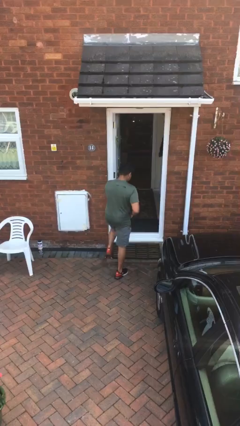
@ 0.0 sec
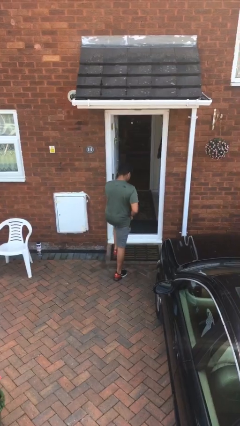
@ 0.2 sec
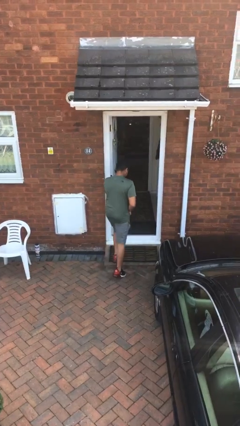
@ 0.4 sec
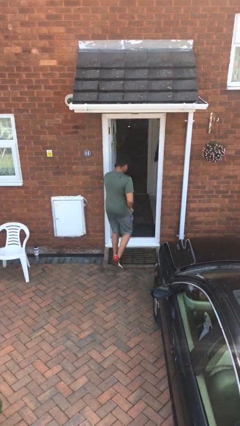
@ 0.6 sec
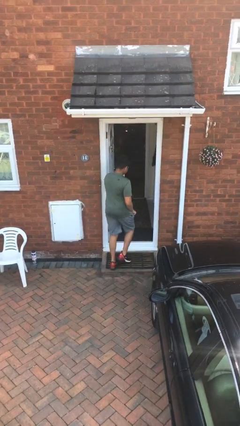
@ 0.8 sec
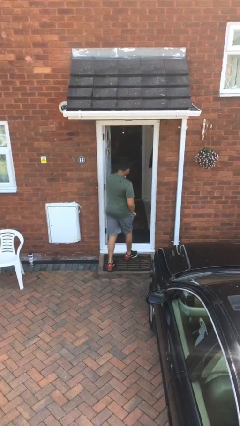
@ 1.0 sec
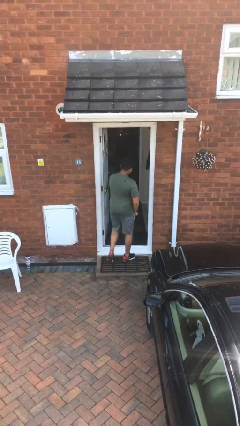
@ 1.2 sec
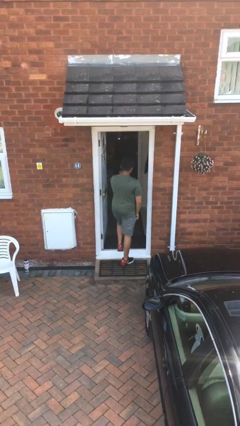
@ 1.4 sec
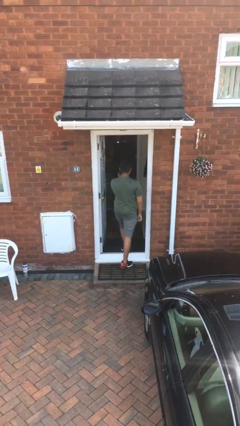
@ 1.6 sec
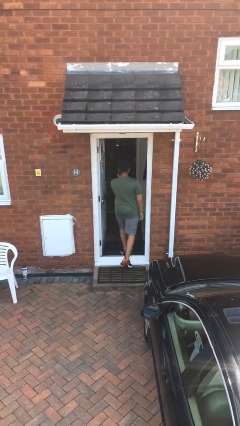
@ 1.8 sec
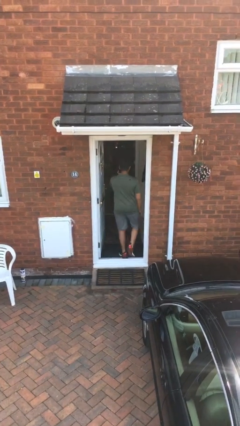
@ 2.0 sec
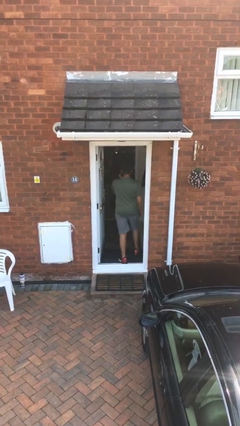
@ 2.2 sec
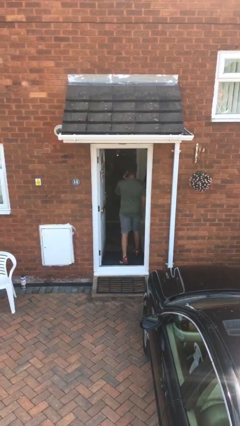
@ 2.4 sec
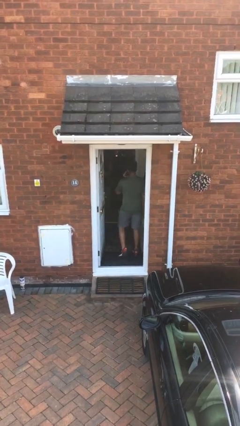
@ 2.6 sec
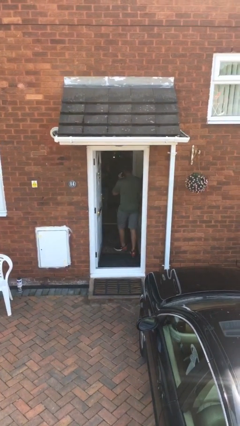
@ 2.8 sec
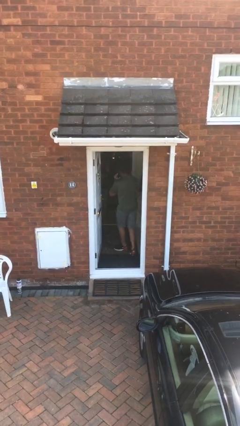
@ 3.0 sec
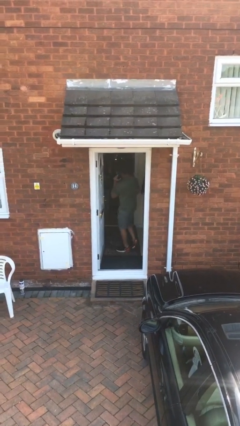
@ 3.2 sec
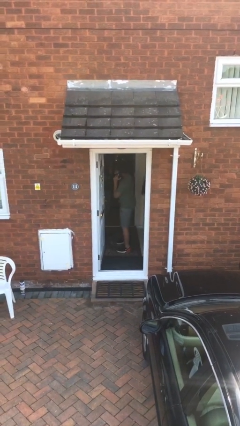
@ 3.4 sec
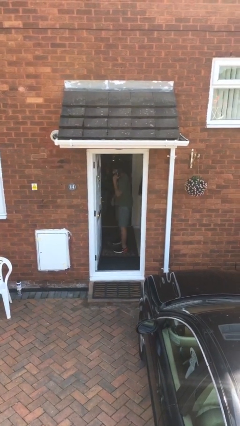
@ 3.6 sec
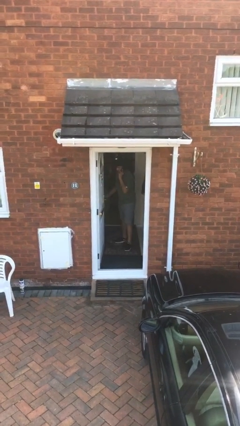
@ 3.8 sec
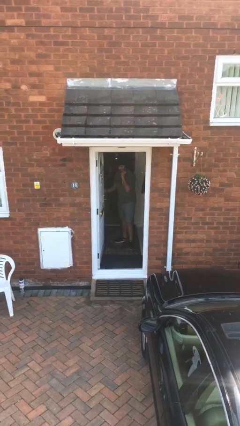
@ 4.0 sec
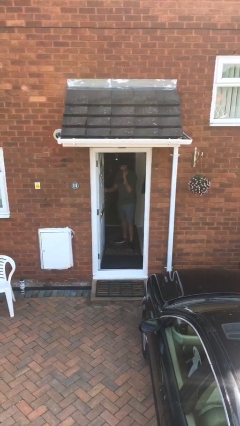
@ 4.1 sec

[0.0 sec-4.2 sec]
person exits scene through structure

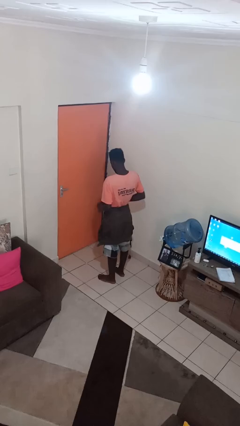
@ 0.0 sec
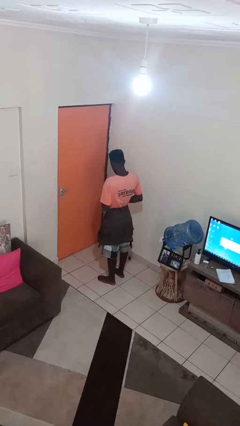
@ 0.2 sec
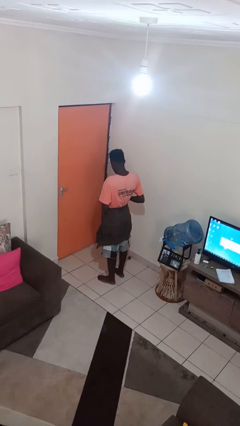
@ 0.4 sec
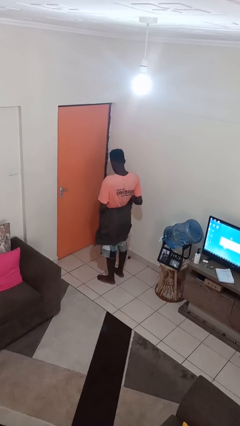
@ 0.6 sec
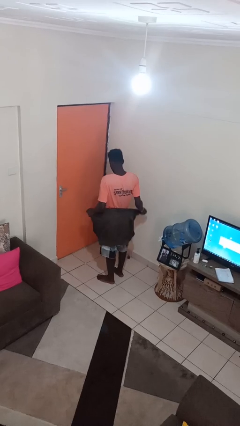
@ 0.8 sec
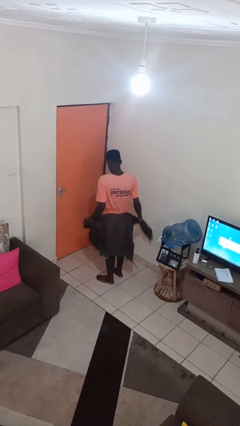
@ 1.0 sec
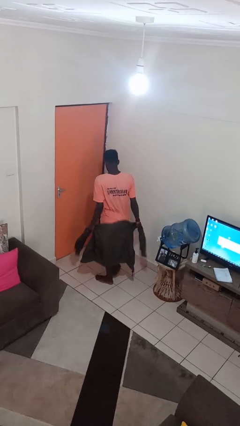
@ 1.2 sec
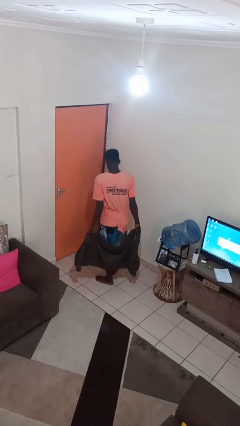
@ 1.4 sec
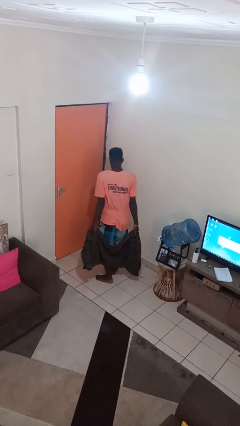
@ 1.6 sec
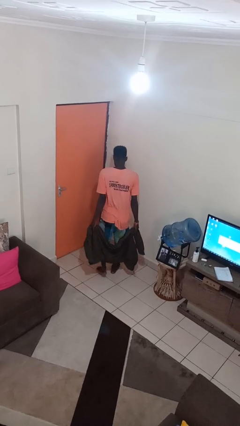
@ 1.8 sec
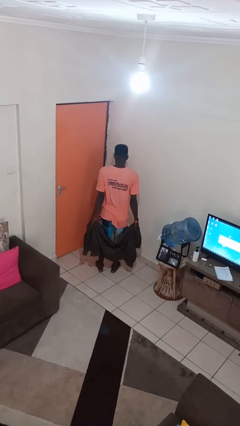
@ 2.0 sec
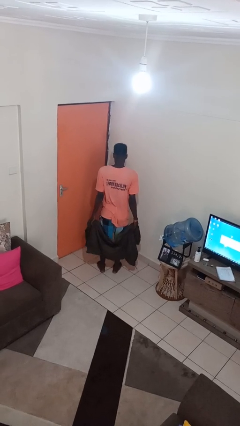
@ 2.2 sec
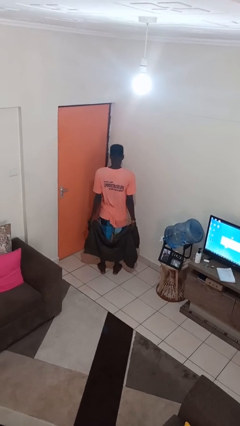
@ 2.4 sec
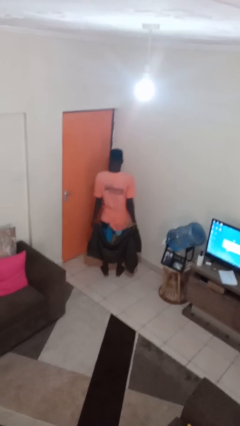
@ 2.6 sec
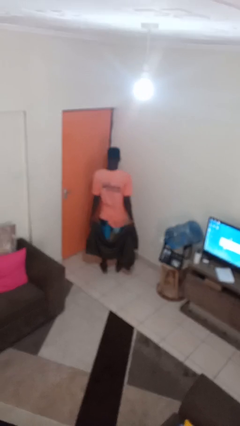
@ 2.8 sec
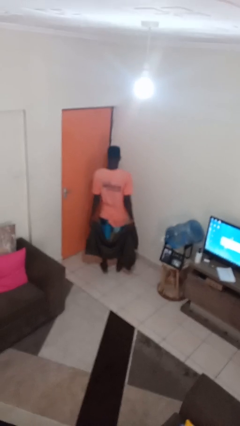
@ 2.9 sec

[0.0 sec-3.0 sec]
person unties jacket around waist

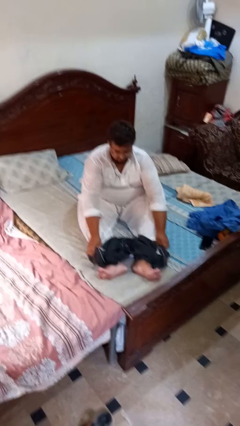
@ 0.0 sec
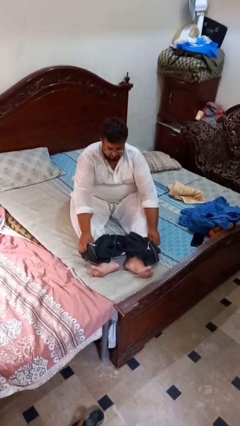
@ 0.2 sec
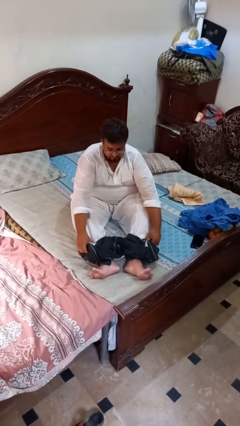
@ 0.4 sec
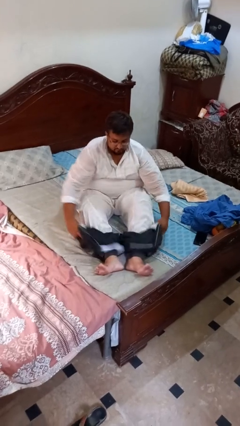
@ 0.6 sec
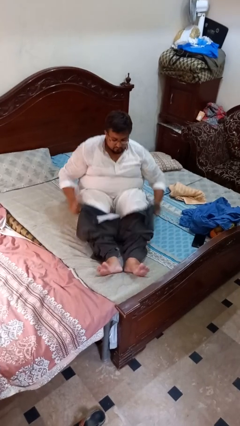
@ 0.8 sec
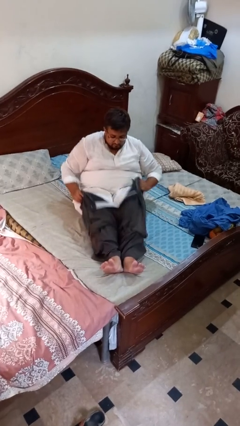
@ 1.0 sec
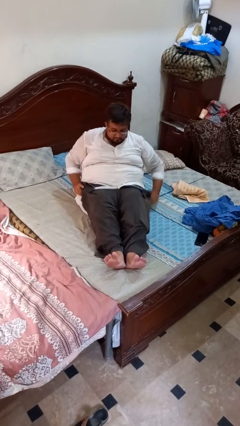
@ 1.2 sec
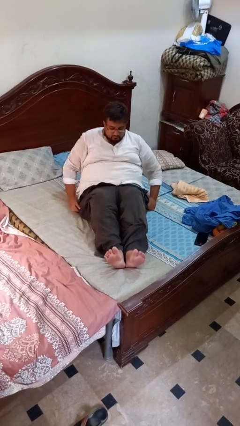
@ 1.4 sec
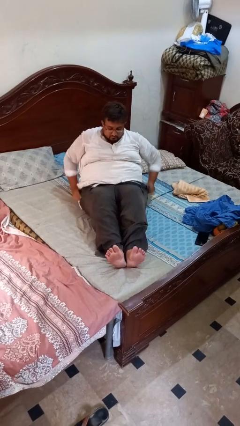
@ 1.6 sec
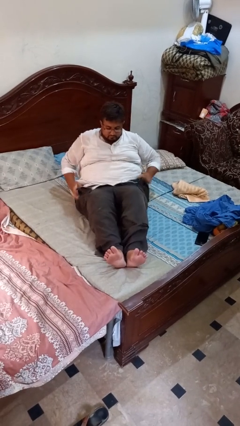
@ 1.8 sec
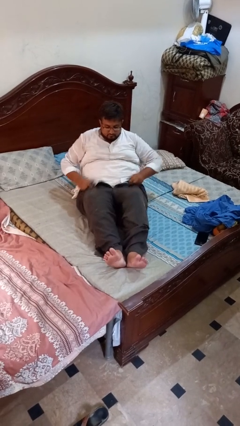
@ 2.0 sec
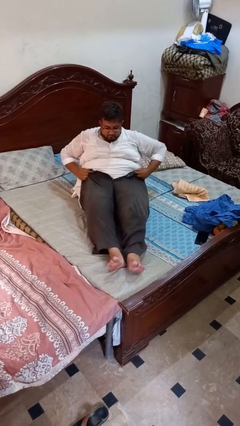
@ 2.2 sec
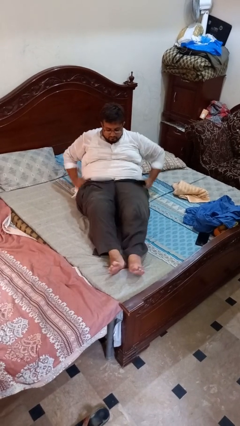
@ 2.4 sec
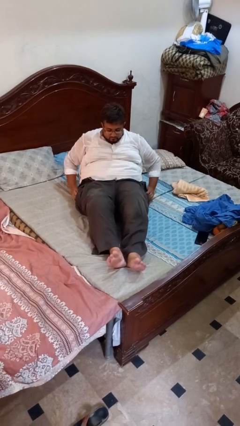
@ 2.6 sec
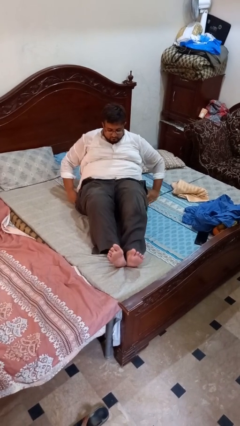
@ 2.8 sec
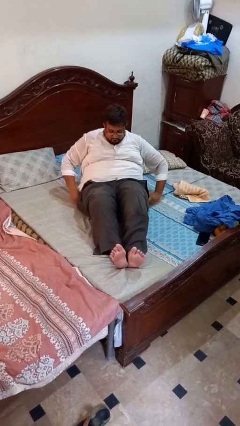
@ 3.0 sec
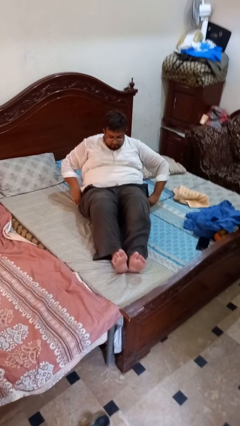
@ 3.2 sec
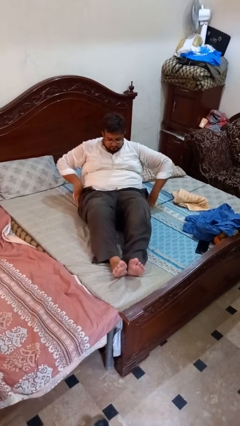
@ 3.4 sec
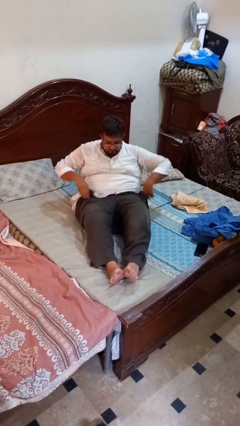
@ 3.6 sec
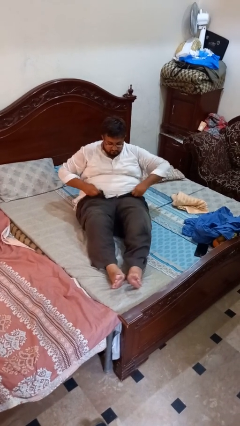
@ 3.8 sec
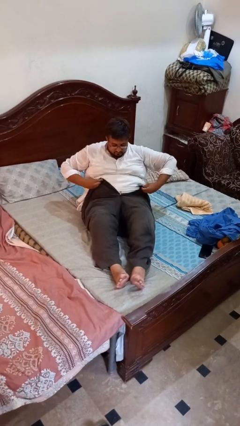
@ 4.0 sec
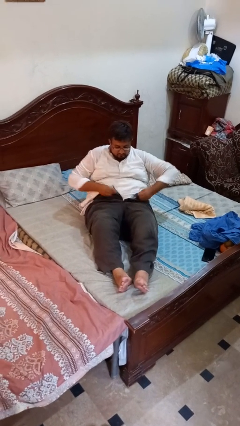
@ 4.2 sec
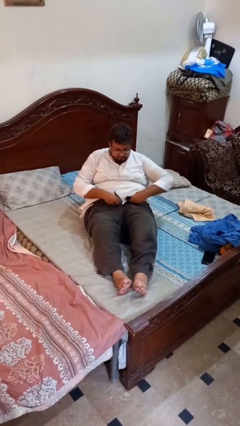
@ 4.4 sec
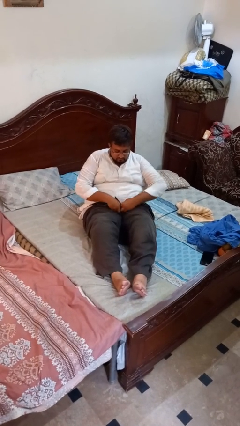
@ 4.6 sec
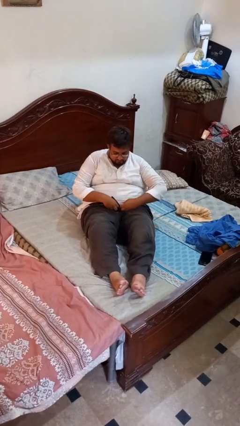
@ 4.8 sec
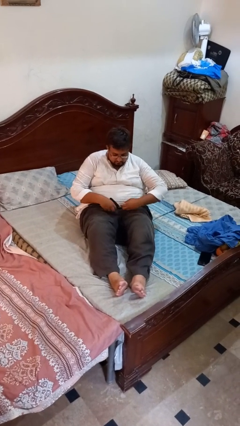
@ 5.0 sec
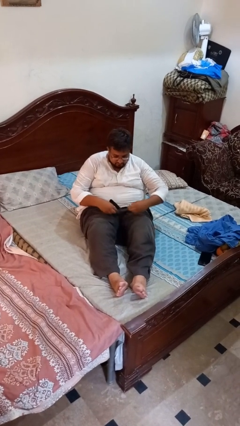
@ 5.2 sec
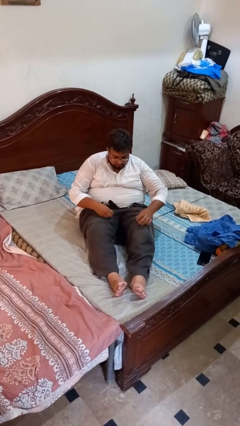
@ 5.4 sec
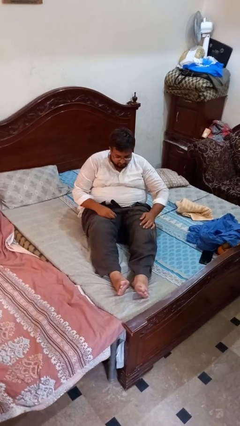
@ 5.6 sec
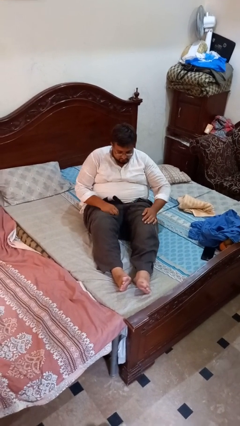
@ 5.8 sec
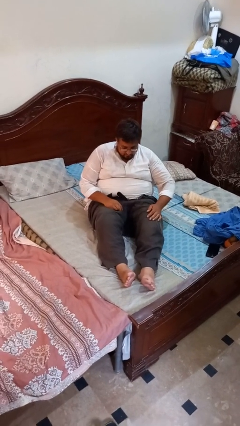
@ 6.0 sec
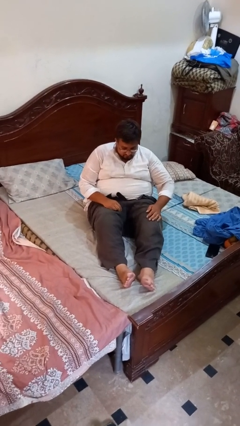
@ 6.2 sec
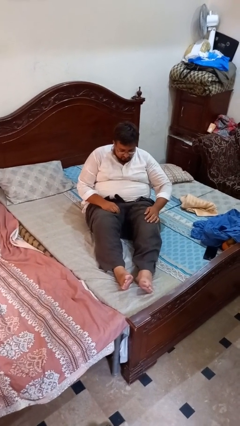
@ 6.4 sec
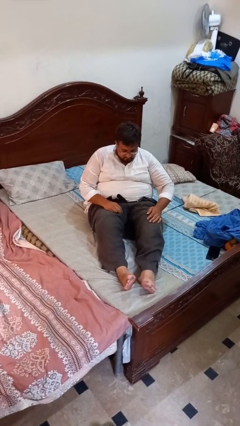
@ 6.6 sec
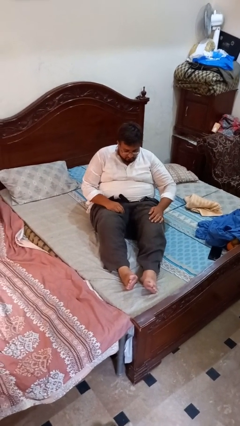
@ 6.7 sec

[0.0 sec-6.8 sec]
person puts on pants

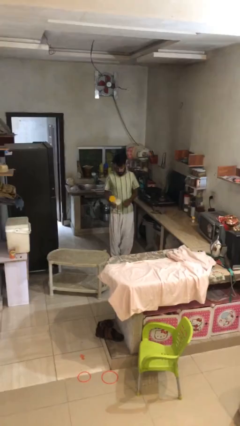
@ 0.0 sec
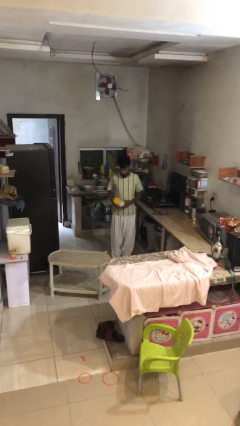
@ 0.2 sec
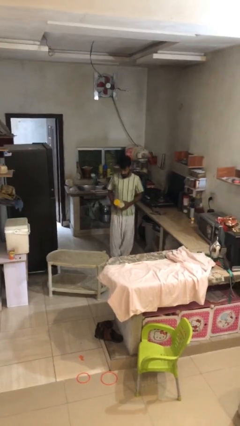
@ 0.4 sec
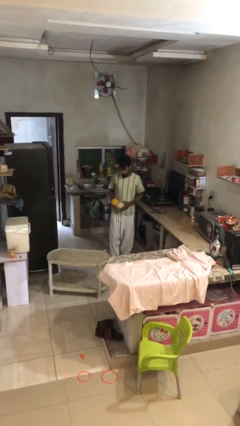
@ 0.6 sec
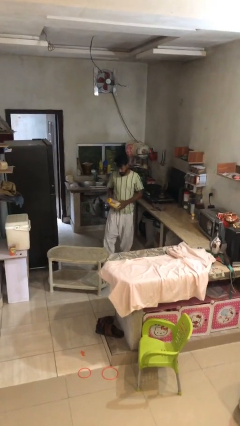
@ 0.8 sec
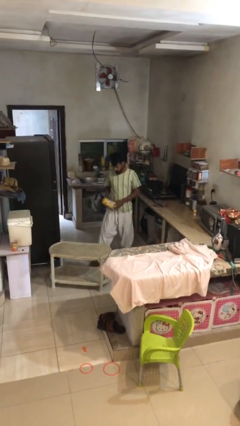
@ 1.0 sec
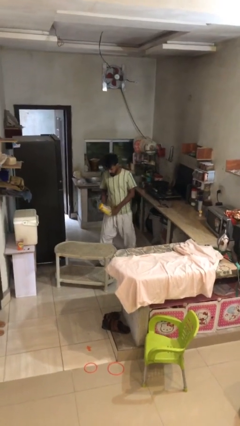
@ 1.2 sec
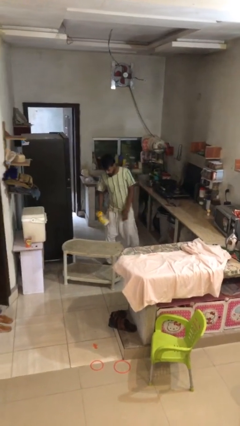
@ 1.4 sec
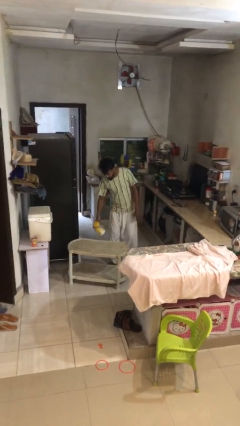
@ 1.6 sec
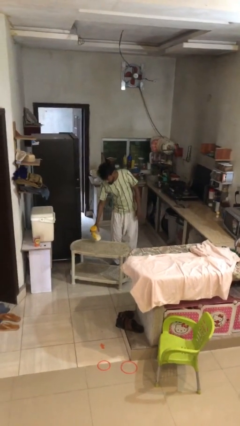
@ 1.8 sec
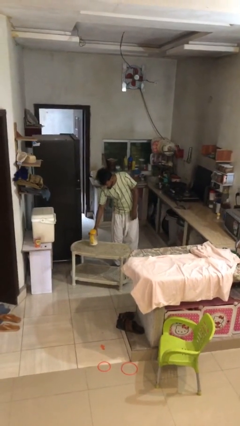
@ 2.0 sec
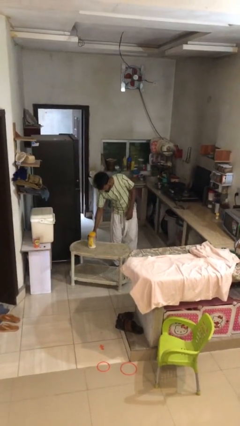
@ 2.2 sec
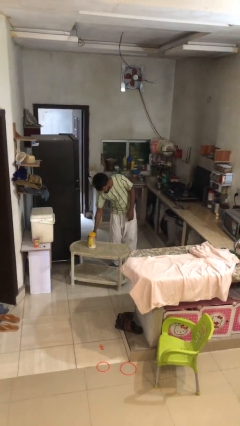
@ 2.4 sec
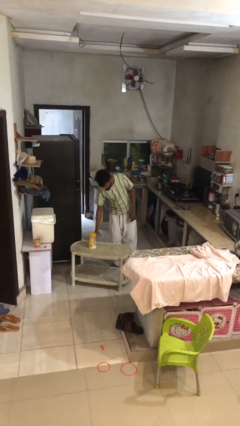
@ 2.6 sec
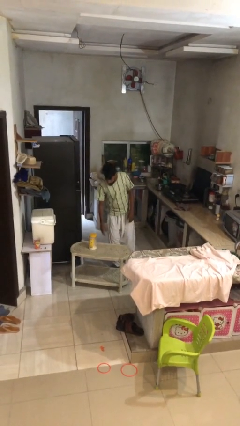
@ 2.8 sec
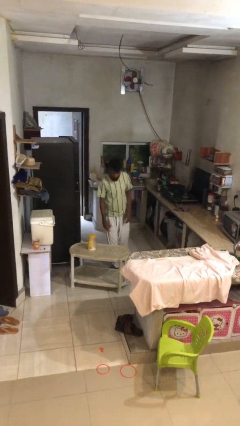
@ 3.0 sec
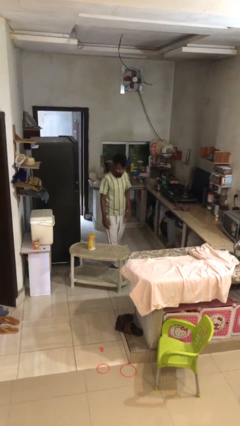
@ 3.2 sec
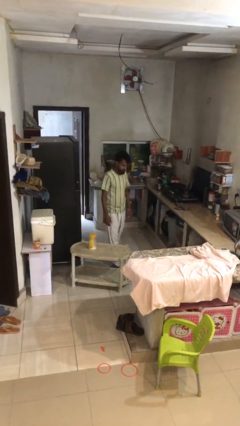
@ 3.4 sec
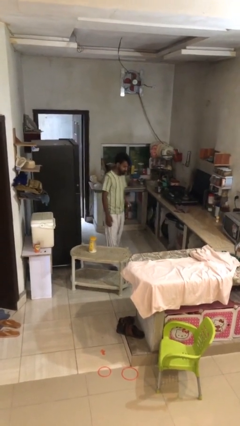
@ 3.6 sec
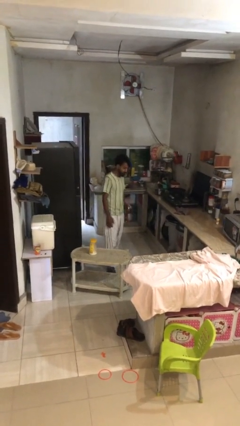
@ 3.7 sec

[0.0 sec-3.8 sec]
person puts down object on table

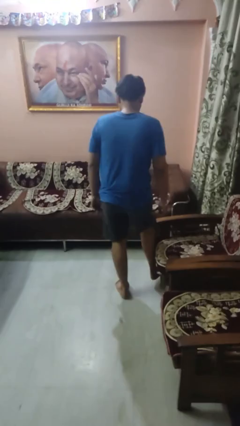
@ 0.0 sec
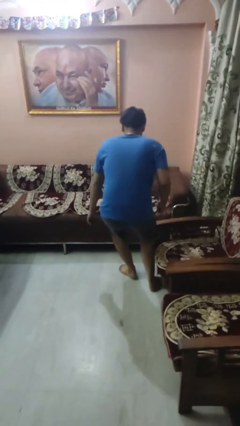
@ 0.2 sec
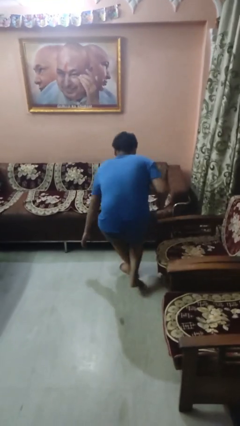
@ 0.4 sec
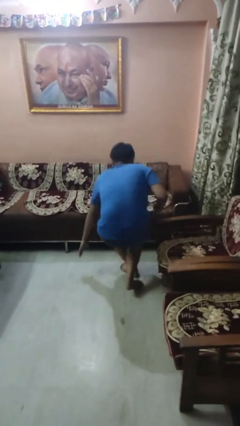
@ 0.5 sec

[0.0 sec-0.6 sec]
person trips on object on floor
